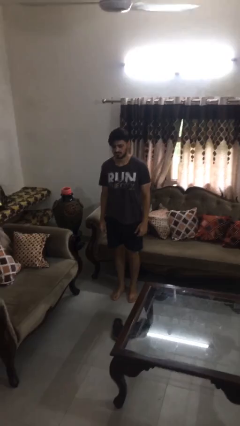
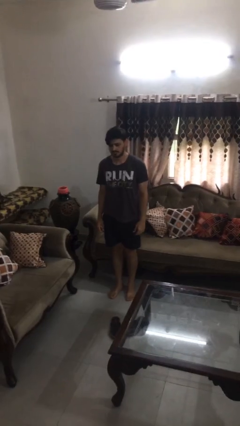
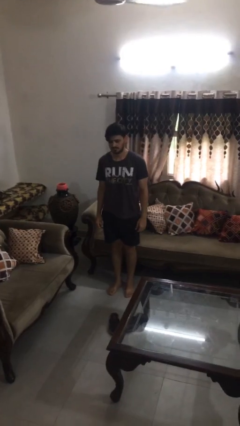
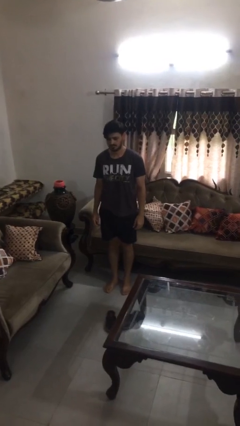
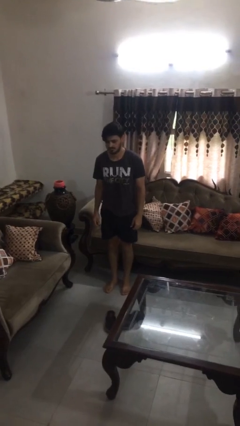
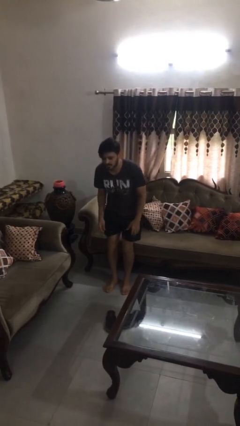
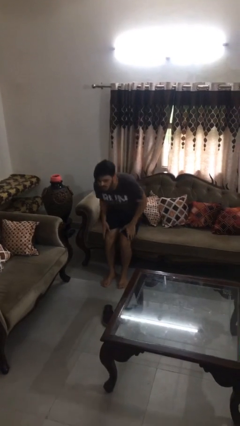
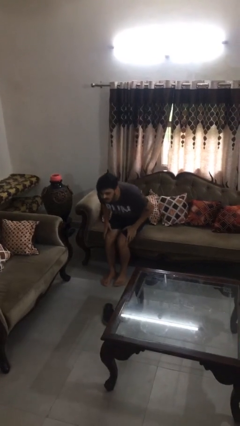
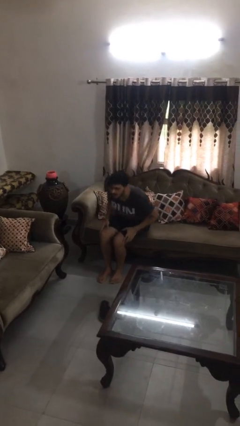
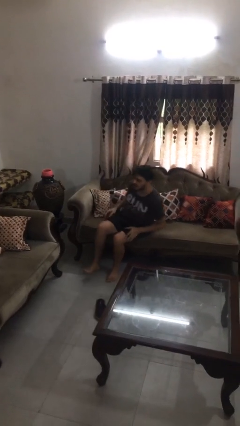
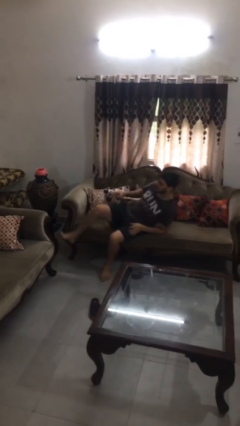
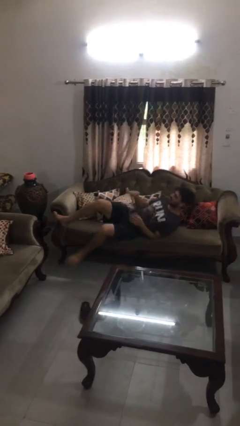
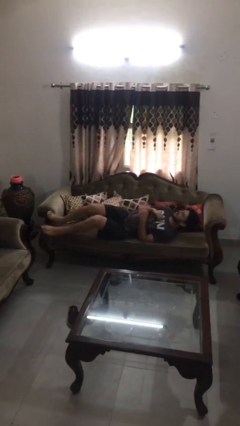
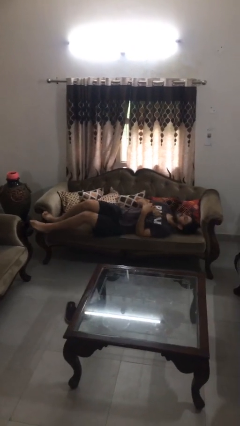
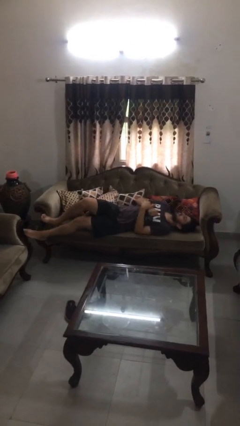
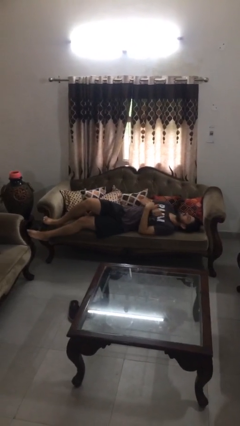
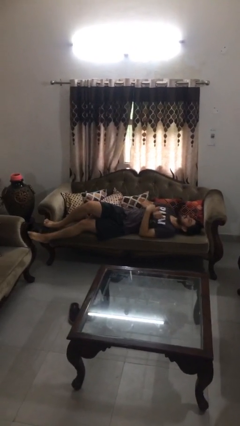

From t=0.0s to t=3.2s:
person lies down on couch

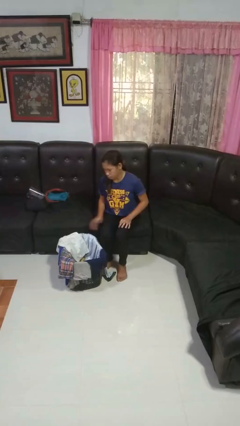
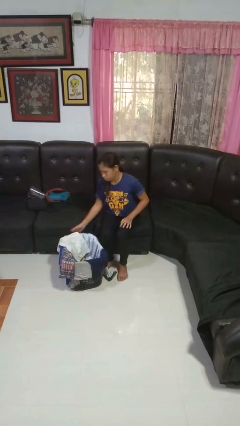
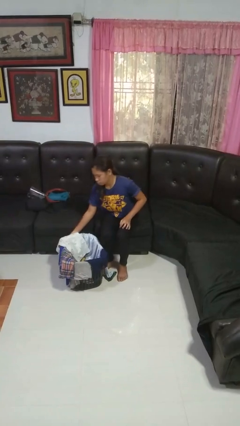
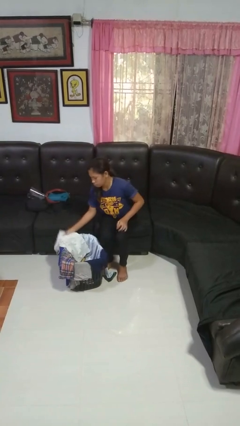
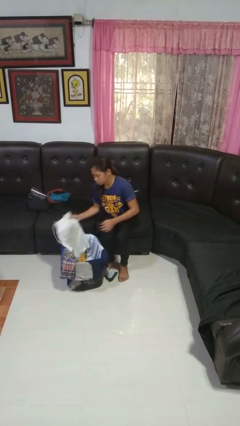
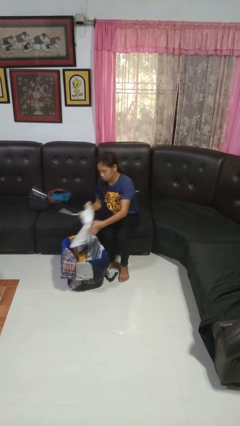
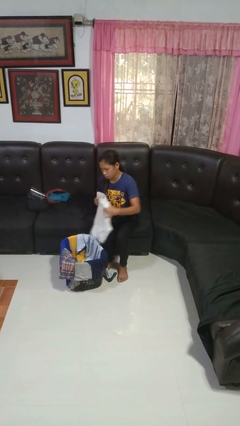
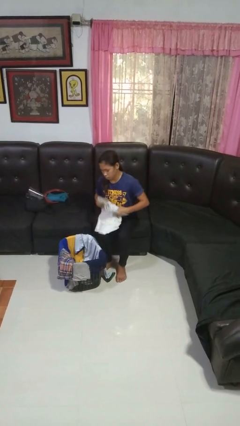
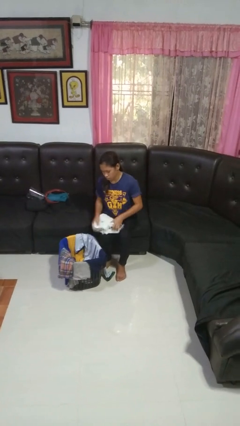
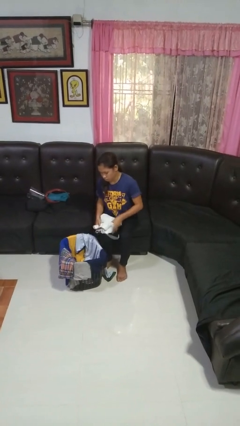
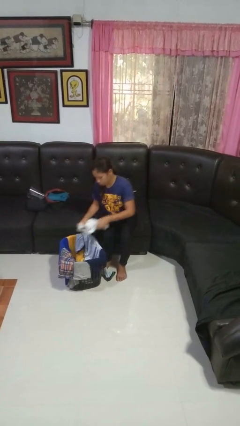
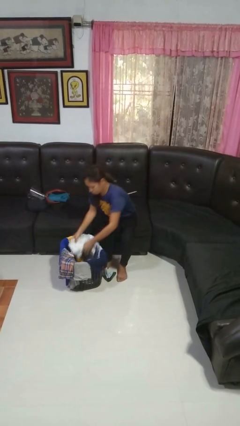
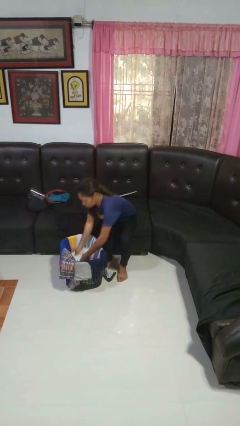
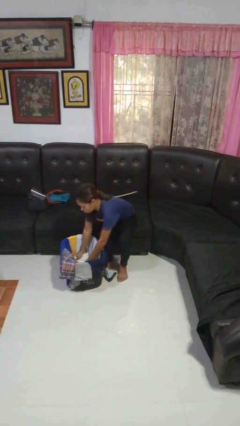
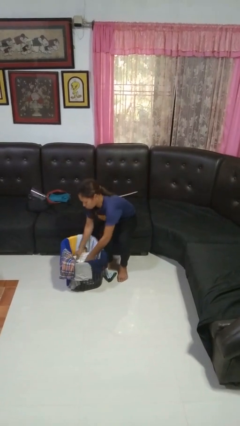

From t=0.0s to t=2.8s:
person folds pants

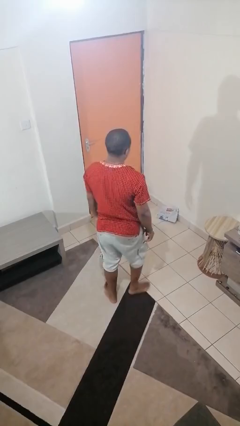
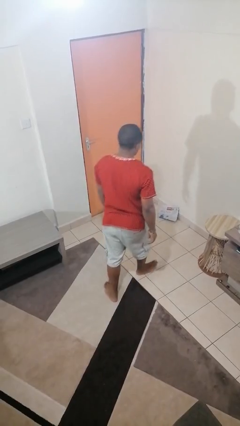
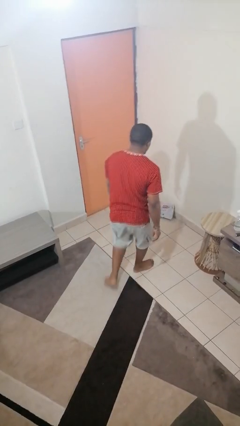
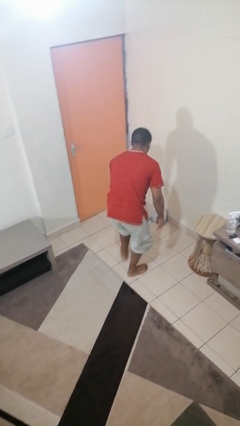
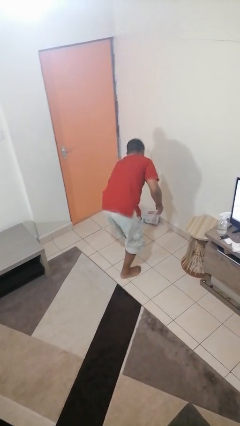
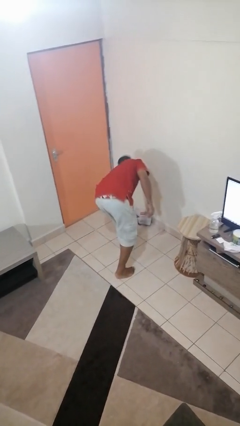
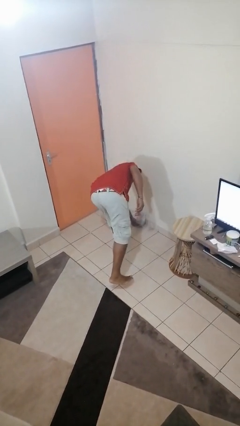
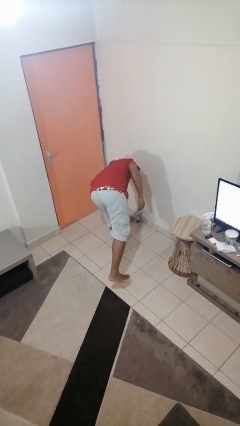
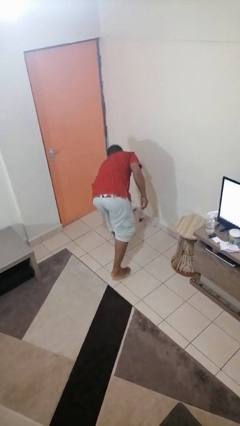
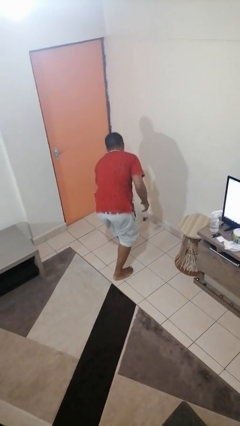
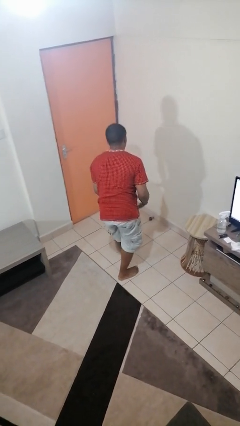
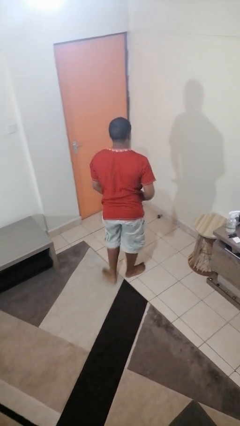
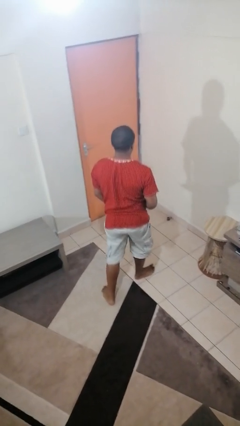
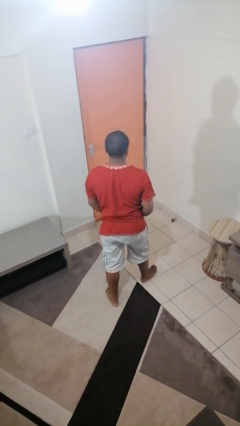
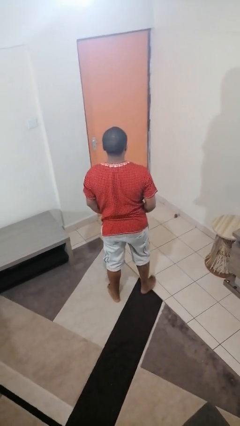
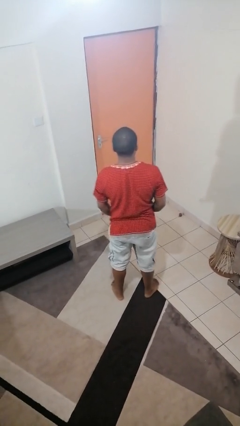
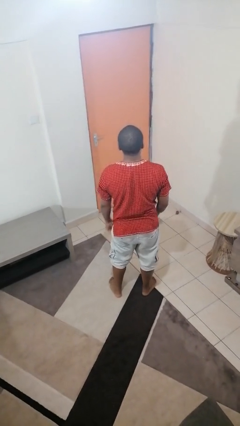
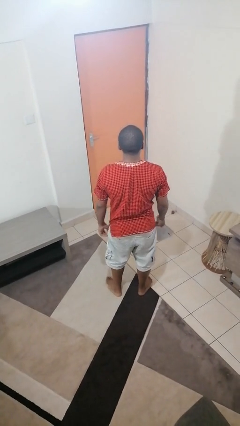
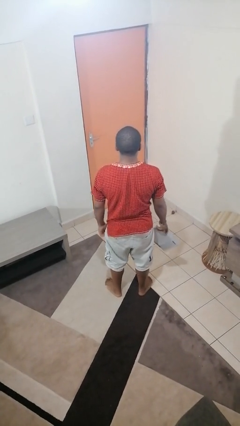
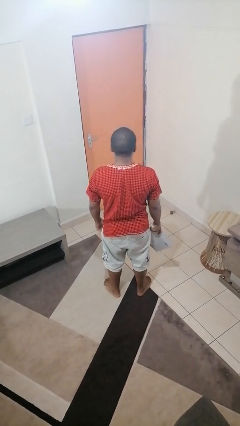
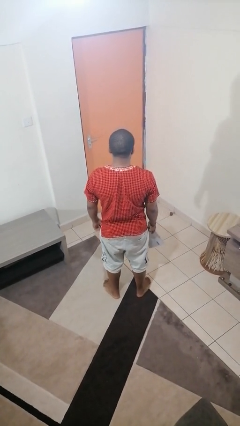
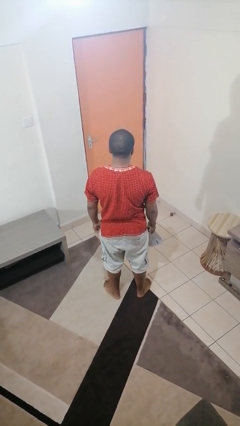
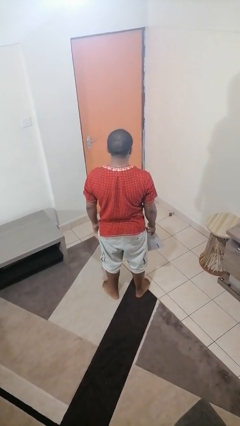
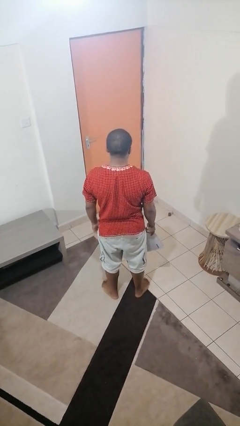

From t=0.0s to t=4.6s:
person picks up object from floor

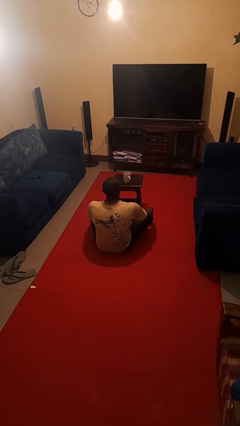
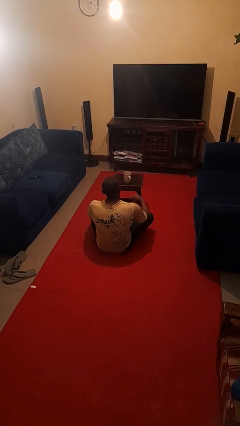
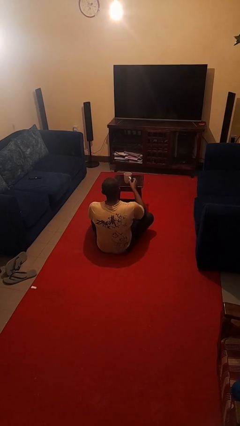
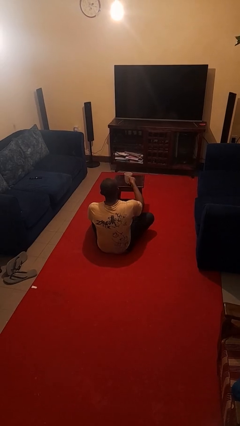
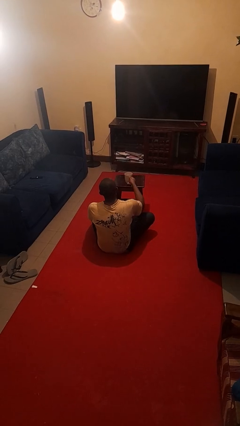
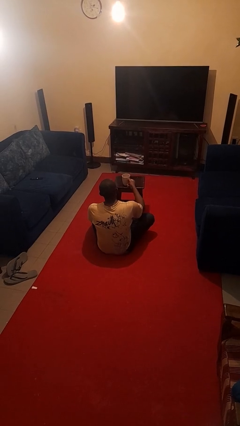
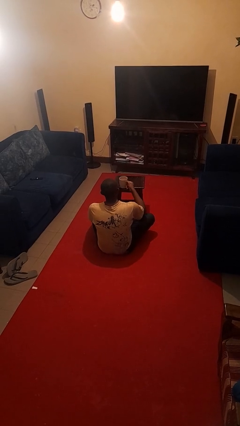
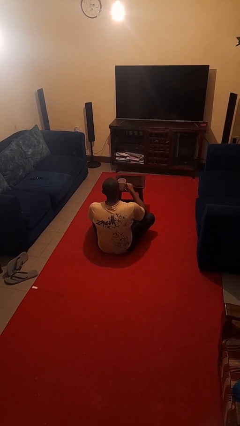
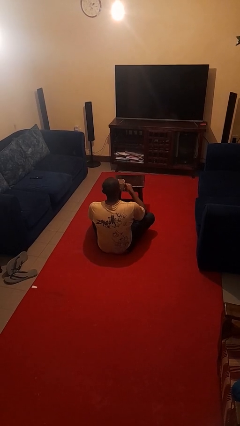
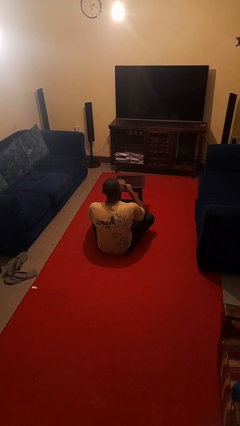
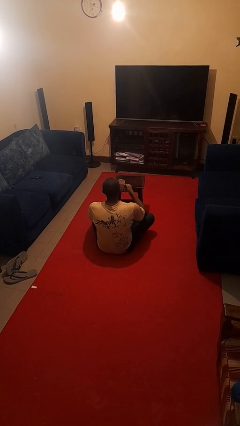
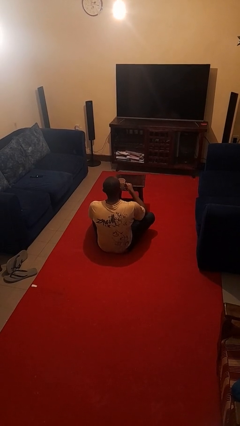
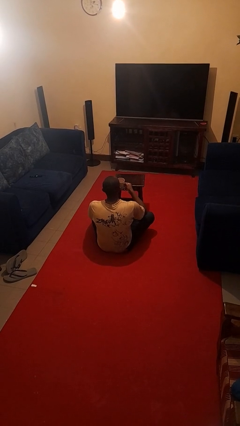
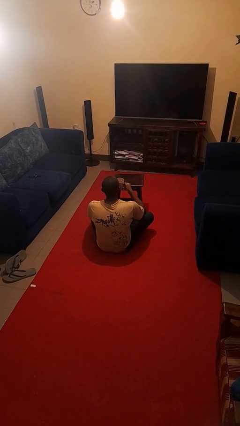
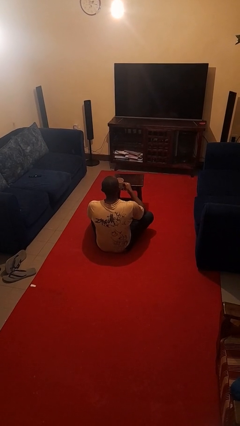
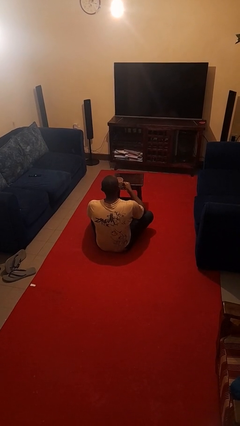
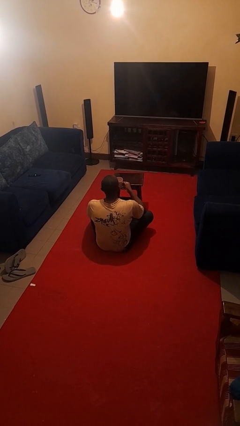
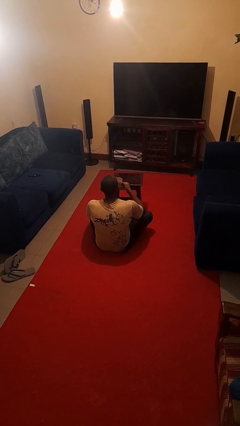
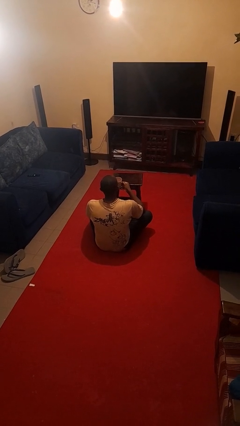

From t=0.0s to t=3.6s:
person picks up object from table

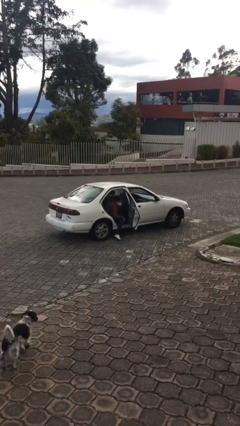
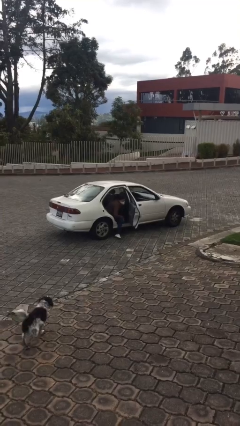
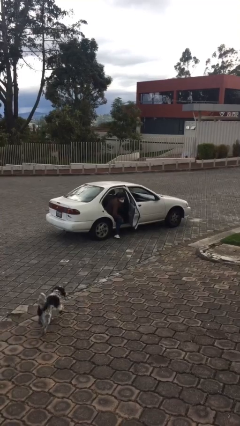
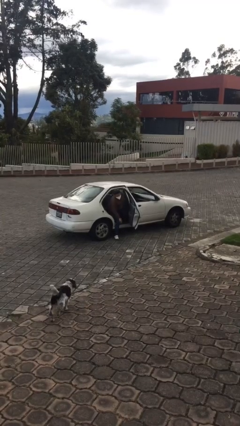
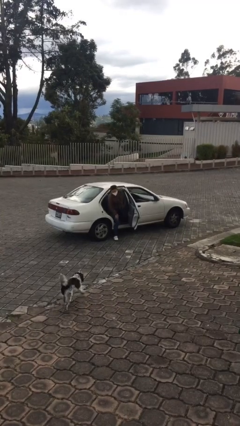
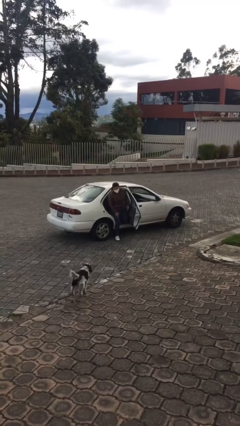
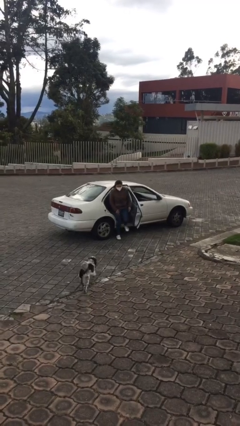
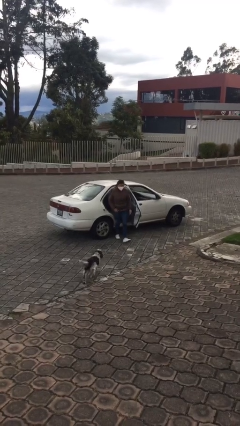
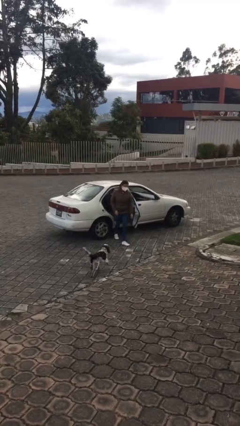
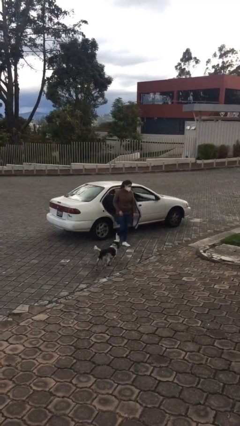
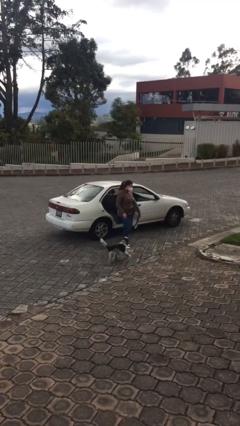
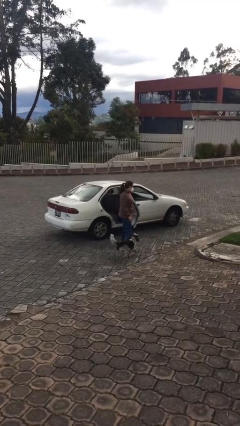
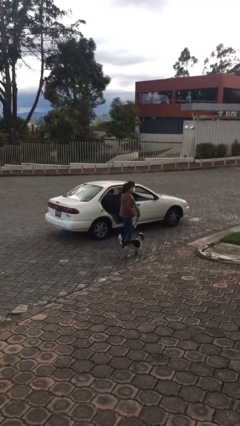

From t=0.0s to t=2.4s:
person exits car

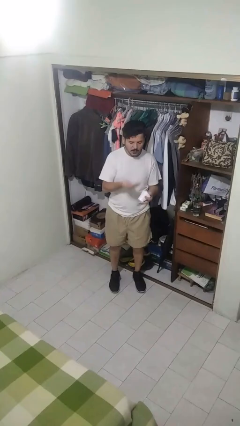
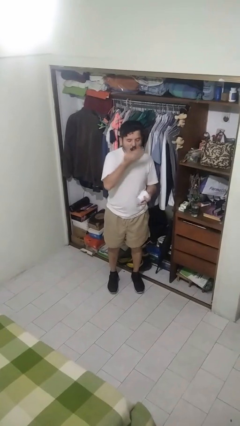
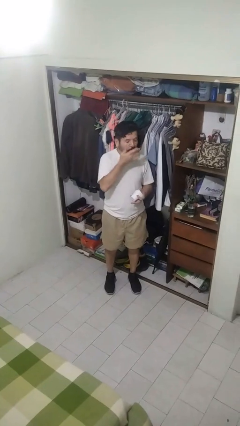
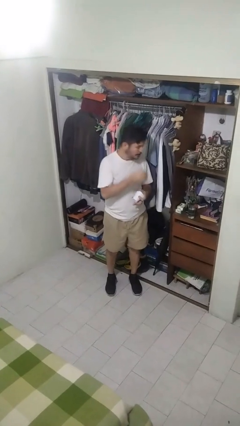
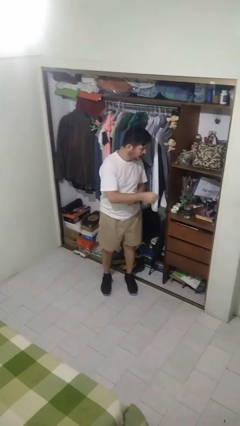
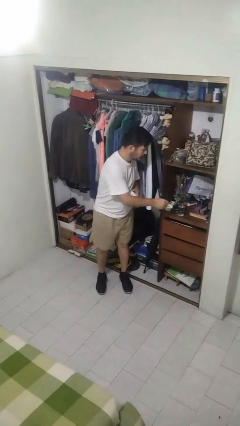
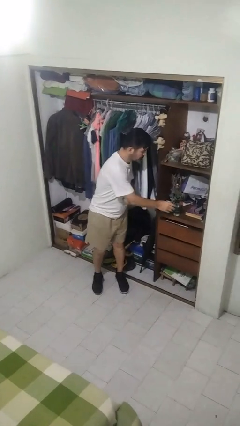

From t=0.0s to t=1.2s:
person takes medicine pills
